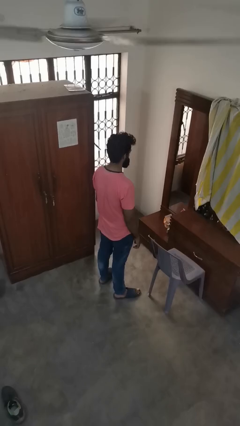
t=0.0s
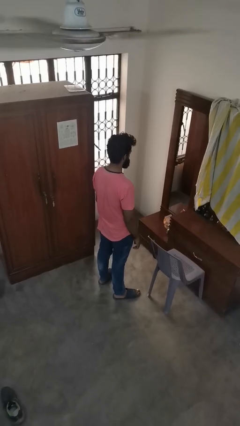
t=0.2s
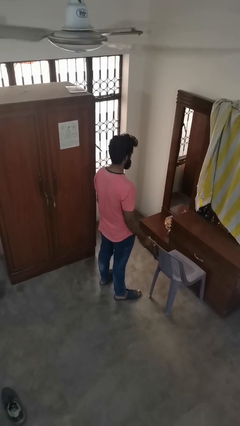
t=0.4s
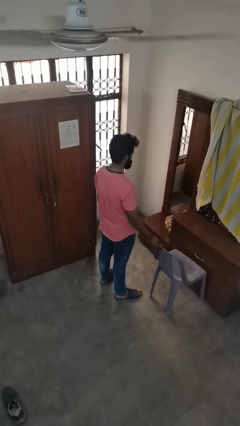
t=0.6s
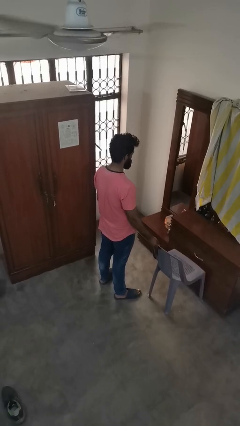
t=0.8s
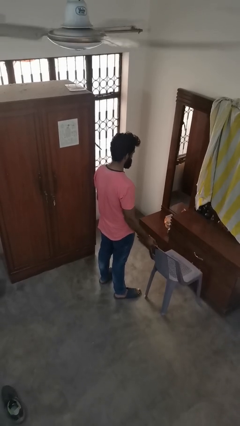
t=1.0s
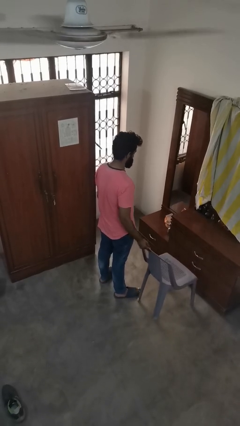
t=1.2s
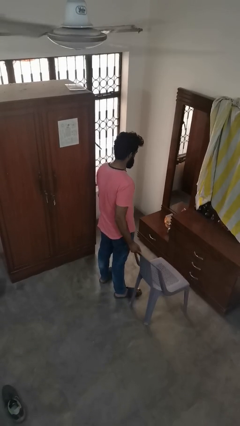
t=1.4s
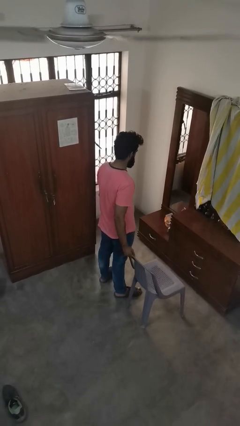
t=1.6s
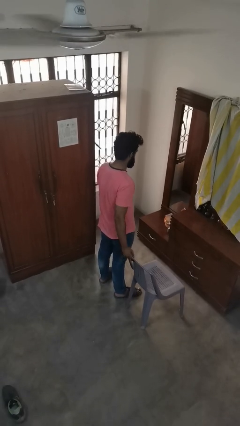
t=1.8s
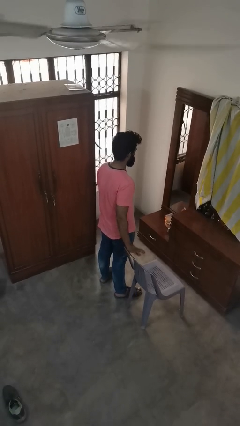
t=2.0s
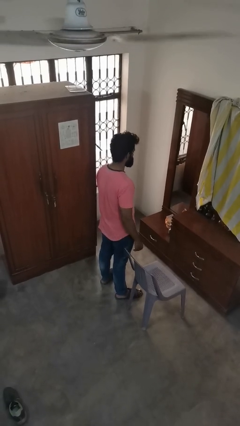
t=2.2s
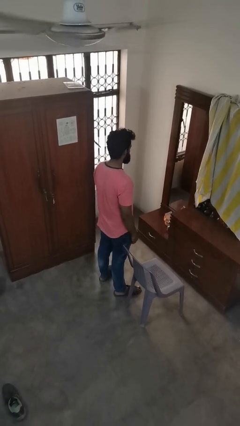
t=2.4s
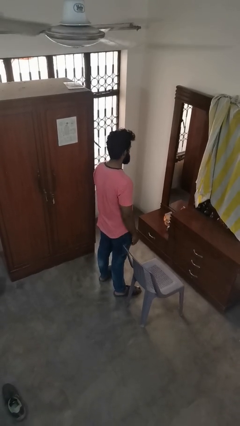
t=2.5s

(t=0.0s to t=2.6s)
person pulls out chair

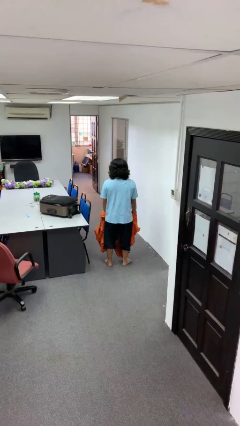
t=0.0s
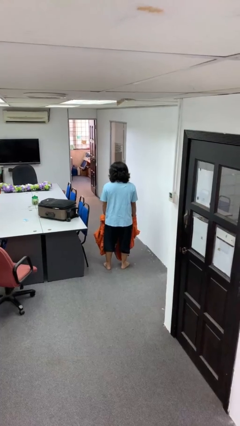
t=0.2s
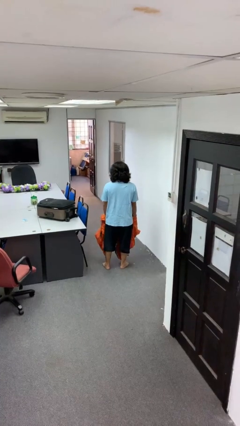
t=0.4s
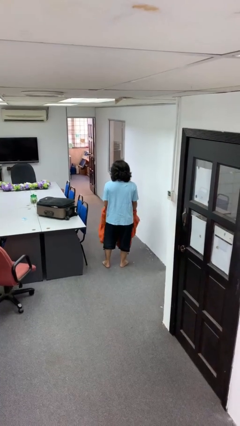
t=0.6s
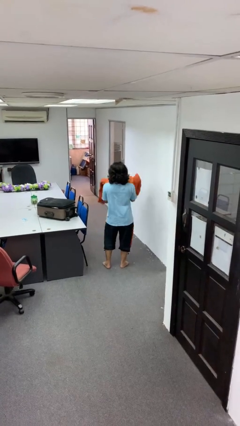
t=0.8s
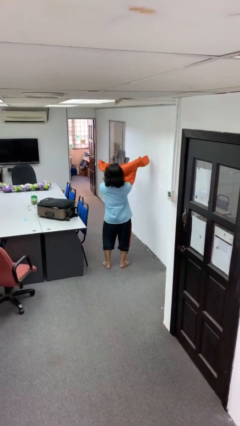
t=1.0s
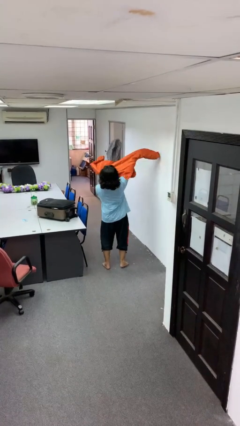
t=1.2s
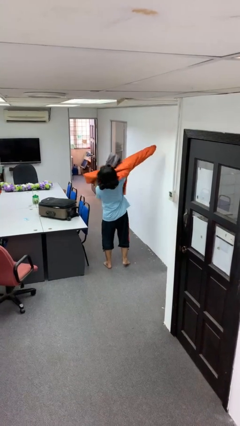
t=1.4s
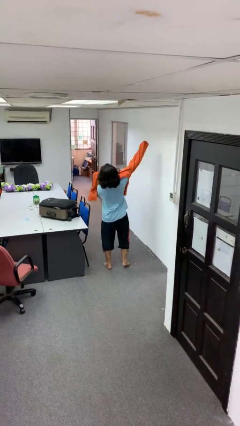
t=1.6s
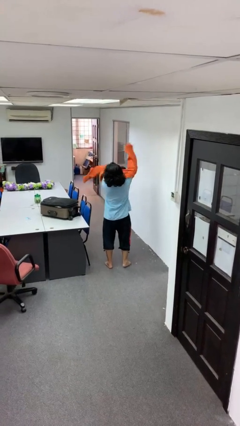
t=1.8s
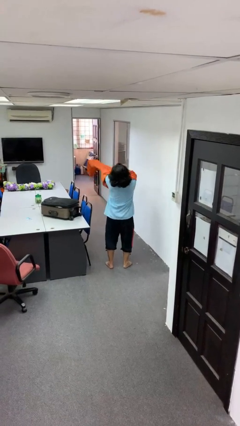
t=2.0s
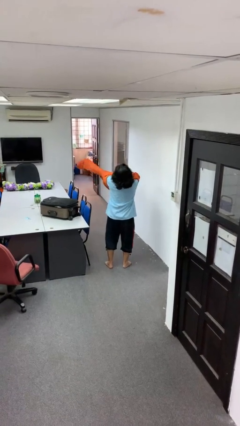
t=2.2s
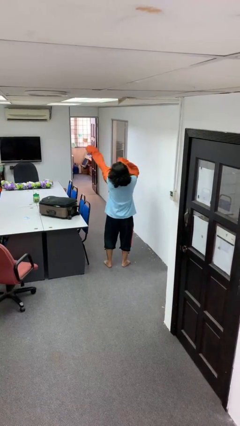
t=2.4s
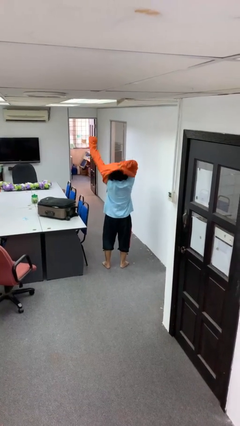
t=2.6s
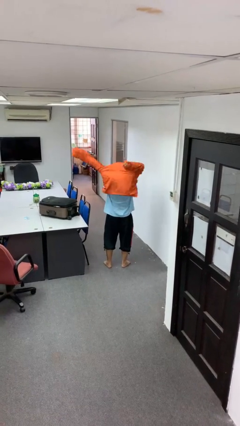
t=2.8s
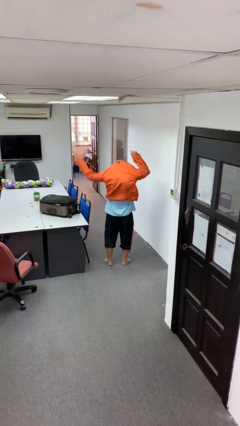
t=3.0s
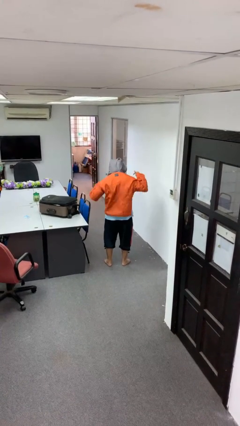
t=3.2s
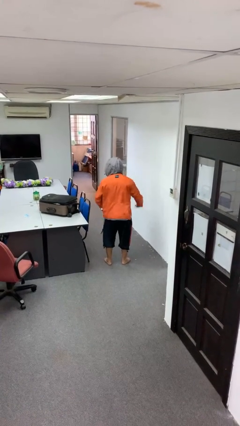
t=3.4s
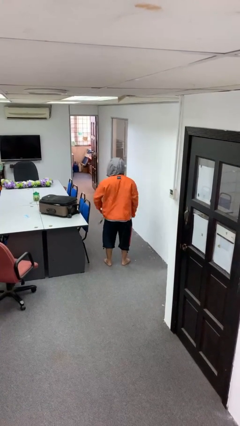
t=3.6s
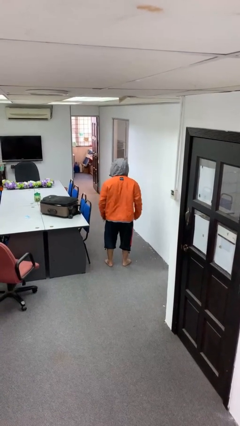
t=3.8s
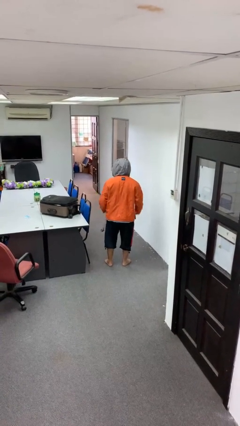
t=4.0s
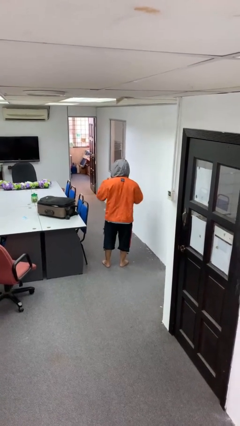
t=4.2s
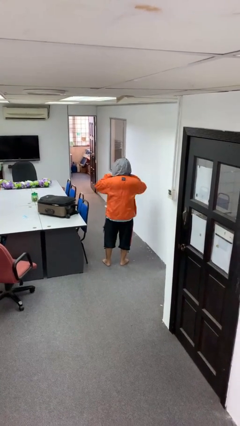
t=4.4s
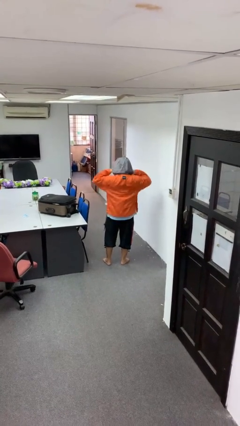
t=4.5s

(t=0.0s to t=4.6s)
person puts on hoodie

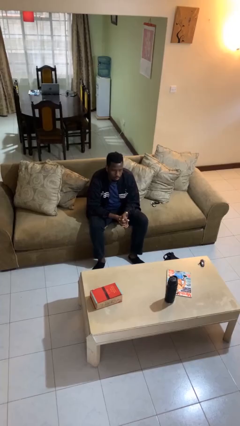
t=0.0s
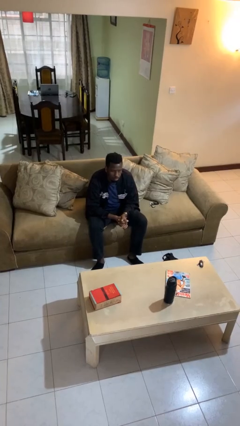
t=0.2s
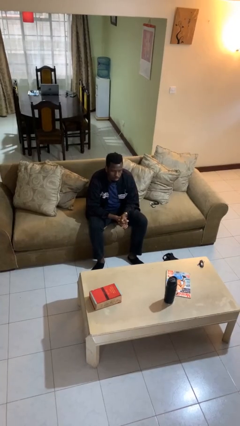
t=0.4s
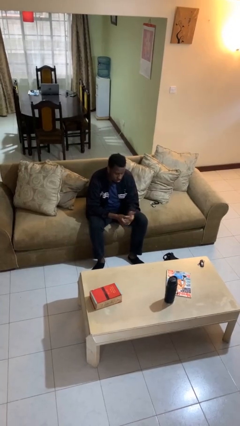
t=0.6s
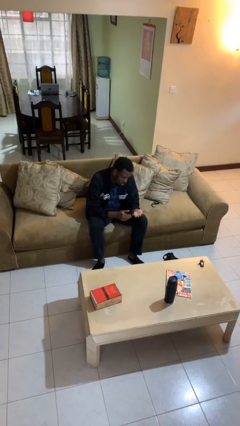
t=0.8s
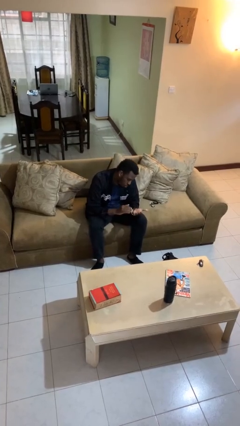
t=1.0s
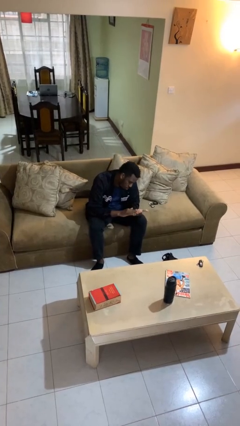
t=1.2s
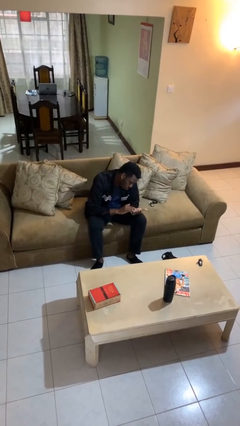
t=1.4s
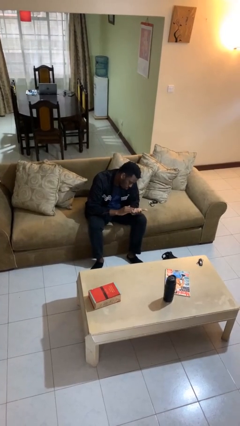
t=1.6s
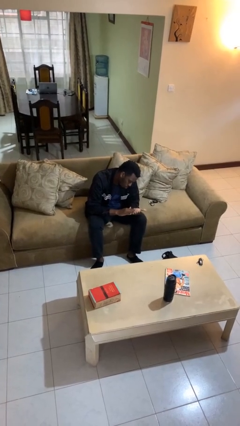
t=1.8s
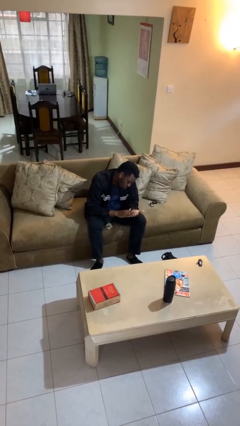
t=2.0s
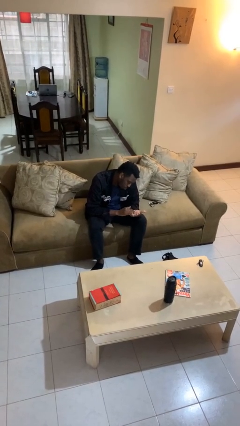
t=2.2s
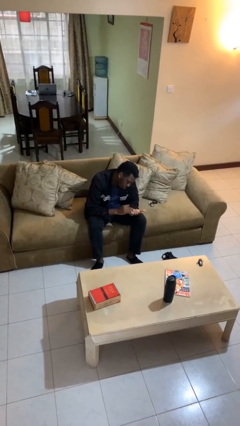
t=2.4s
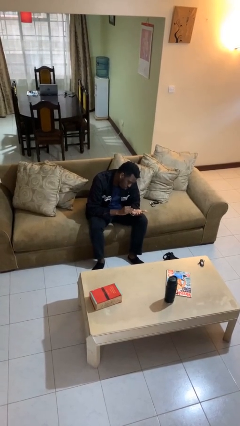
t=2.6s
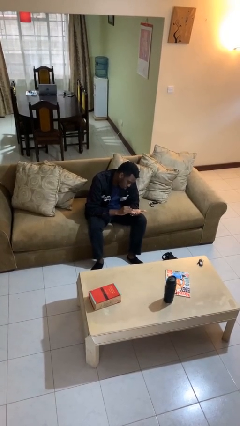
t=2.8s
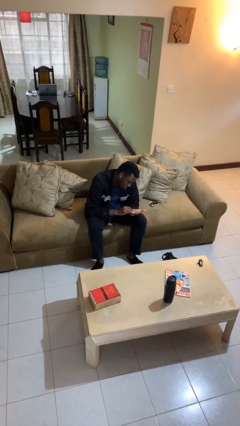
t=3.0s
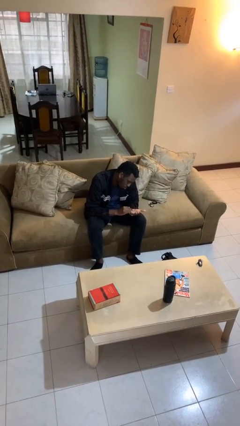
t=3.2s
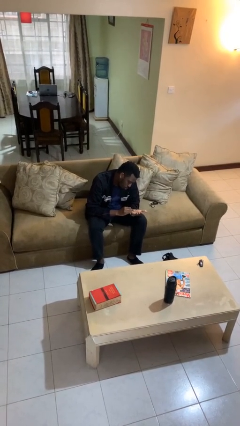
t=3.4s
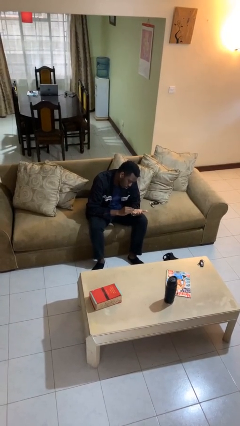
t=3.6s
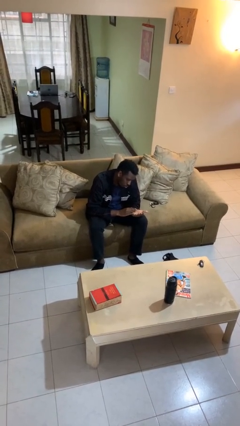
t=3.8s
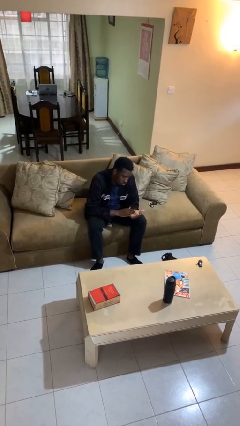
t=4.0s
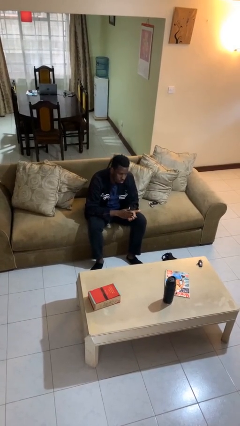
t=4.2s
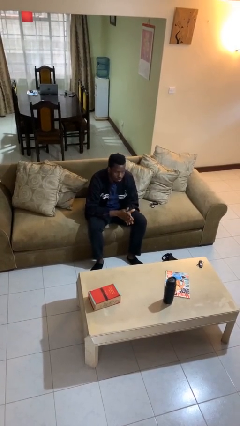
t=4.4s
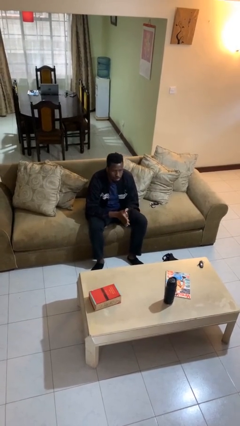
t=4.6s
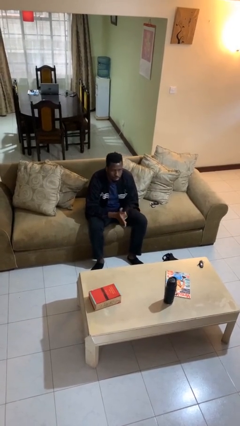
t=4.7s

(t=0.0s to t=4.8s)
person looks at hands in lap

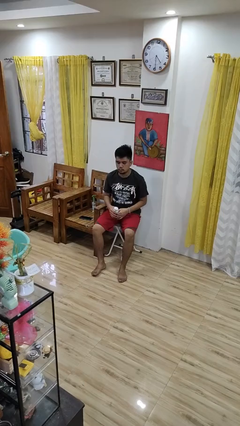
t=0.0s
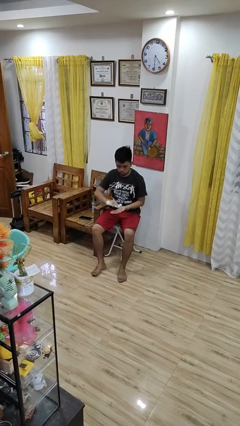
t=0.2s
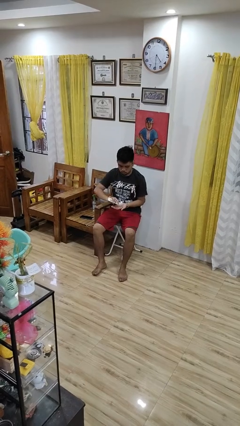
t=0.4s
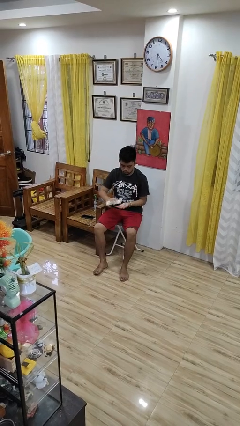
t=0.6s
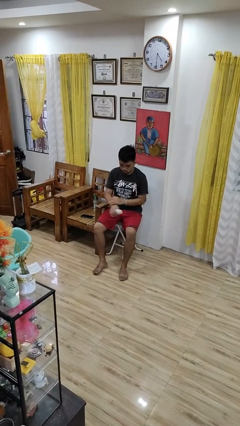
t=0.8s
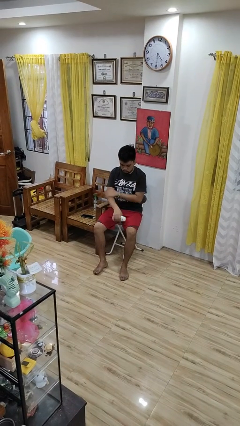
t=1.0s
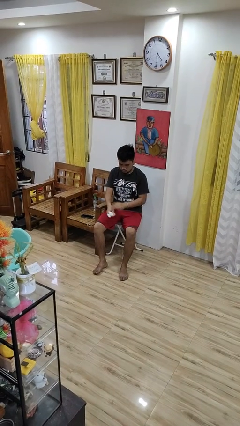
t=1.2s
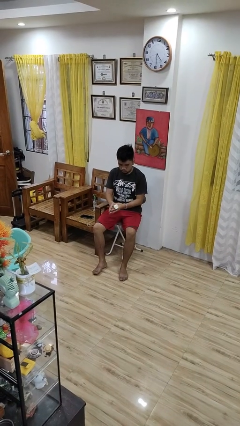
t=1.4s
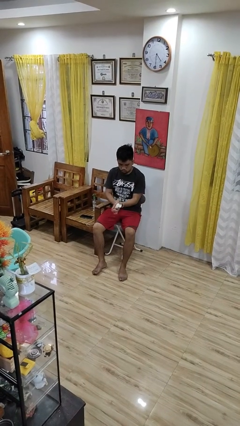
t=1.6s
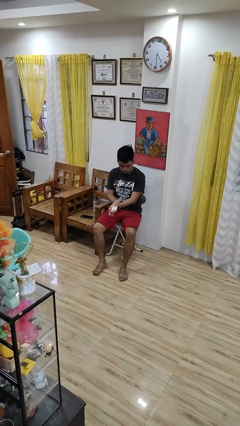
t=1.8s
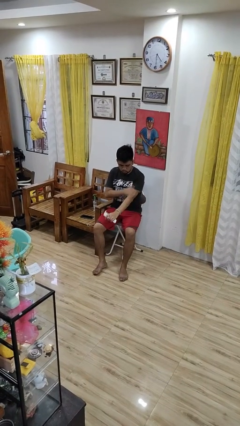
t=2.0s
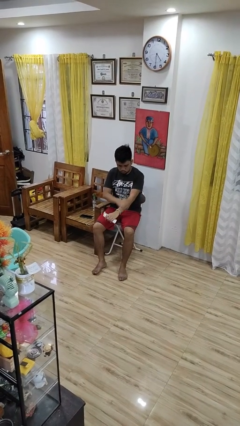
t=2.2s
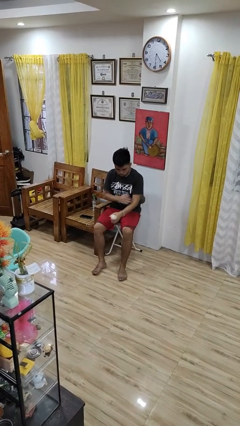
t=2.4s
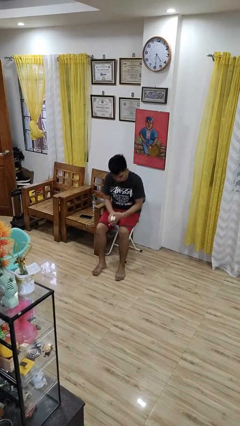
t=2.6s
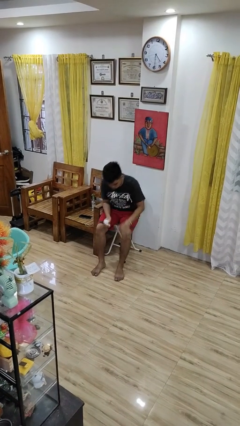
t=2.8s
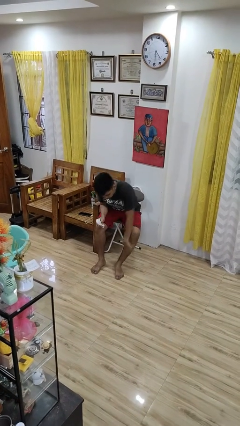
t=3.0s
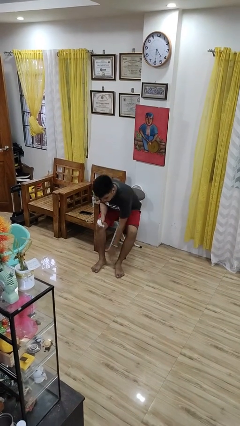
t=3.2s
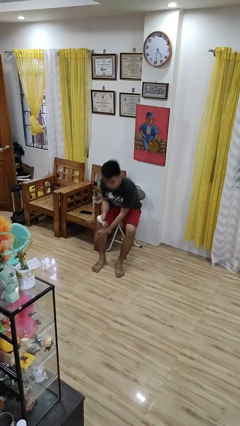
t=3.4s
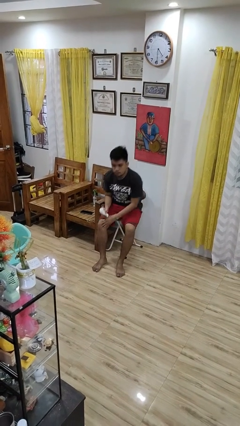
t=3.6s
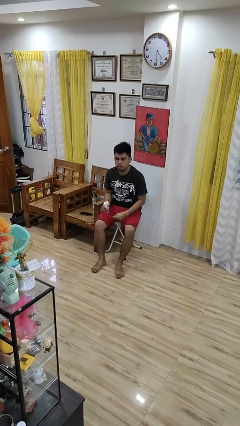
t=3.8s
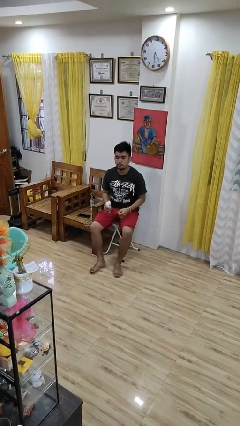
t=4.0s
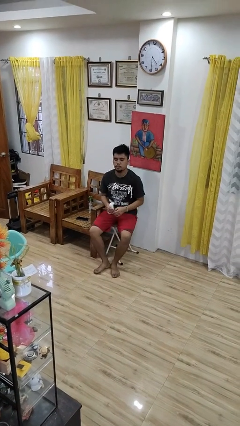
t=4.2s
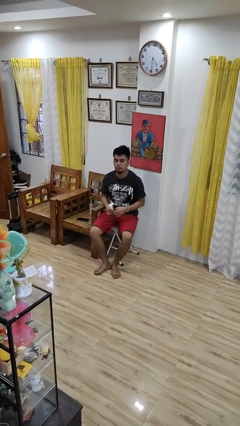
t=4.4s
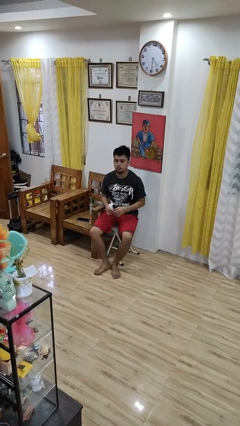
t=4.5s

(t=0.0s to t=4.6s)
person applies sunscreen

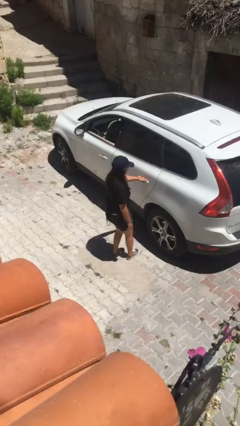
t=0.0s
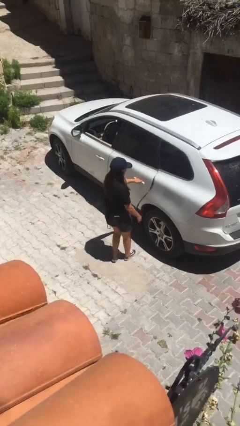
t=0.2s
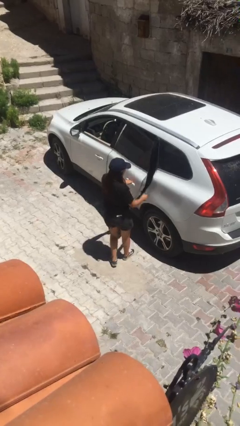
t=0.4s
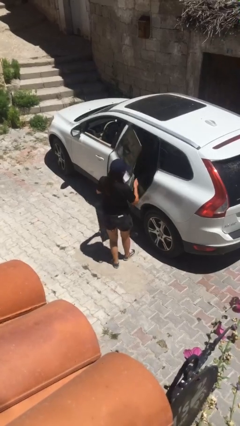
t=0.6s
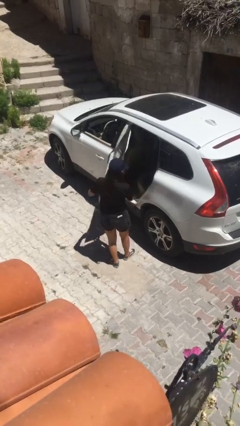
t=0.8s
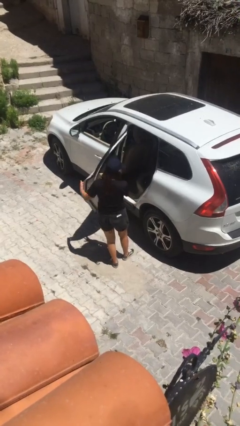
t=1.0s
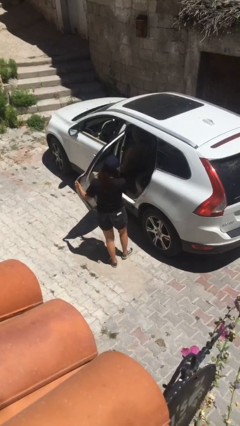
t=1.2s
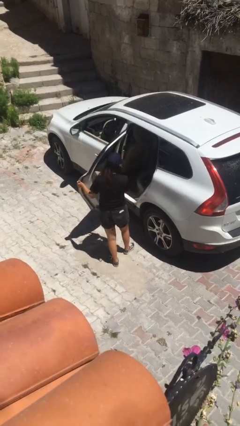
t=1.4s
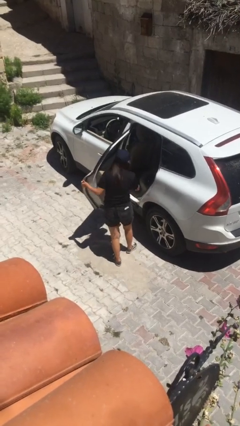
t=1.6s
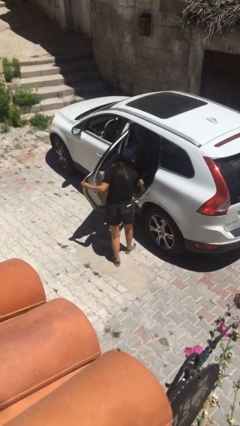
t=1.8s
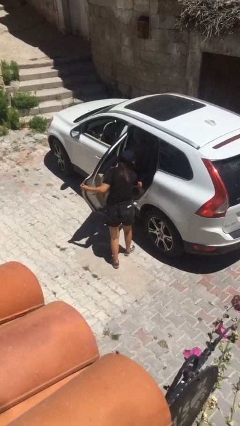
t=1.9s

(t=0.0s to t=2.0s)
person opens car door
